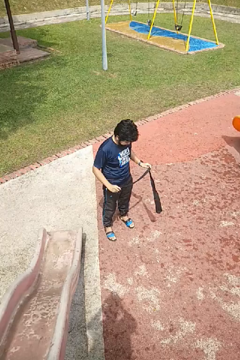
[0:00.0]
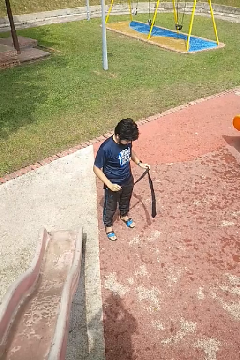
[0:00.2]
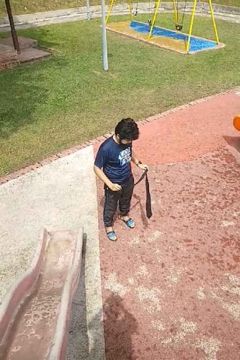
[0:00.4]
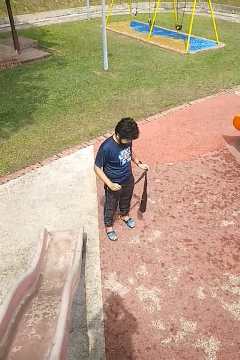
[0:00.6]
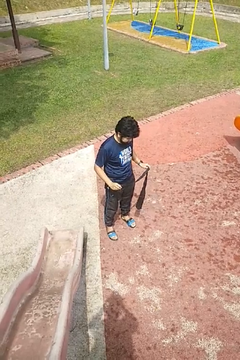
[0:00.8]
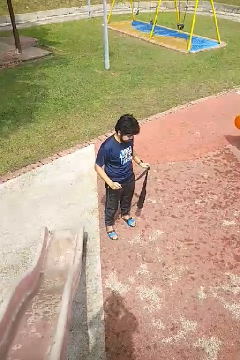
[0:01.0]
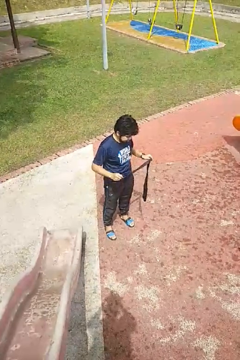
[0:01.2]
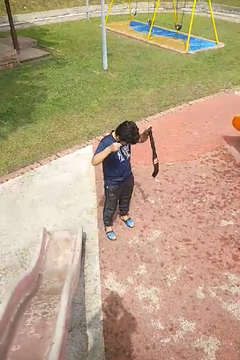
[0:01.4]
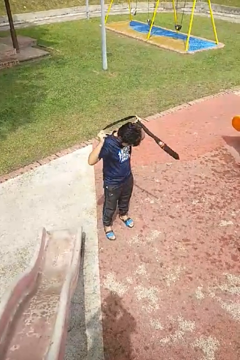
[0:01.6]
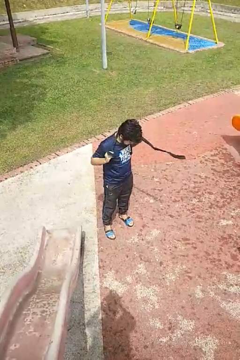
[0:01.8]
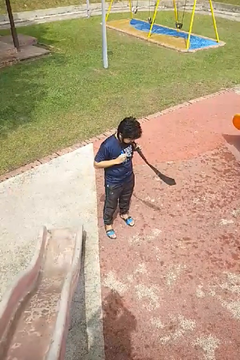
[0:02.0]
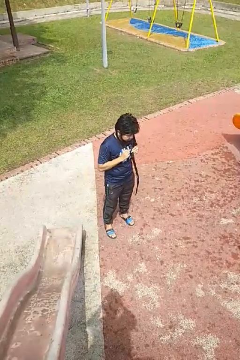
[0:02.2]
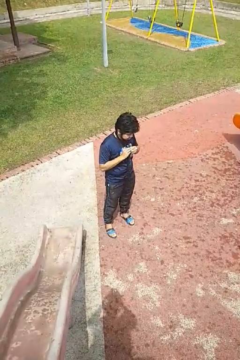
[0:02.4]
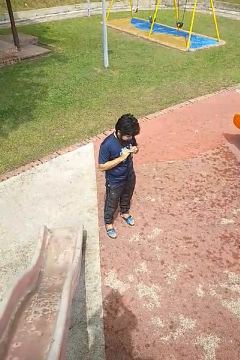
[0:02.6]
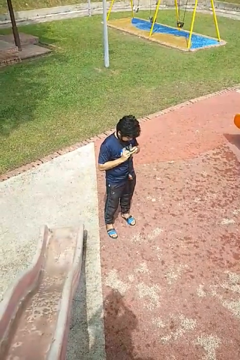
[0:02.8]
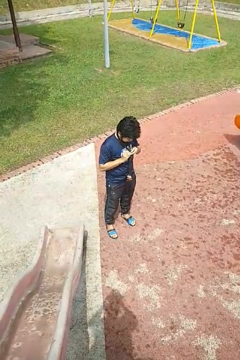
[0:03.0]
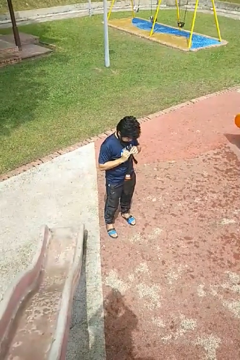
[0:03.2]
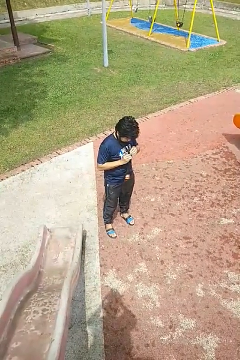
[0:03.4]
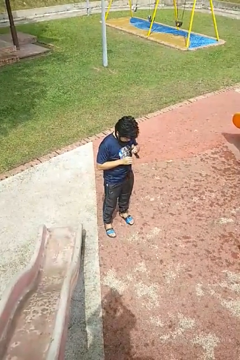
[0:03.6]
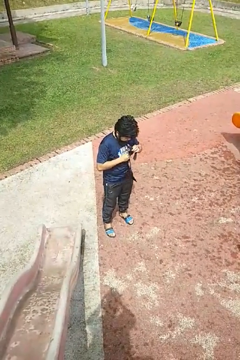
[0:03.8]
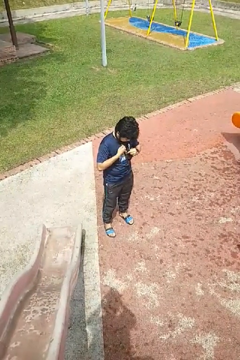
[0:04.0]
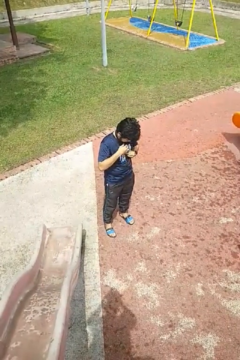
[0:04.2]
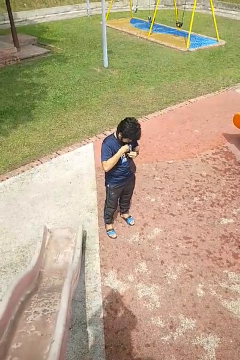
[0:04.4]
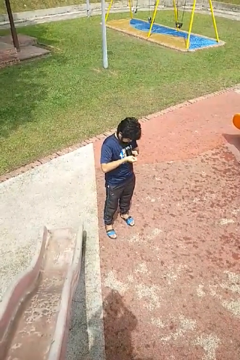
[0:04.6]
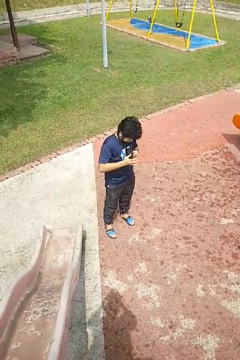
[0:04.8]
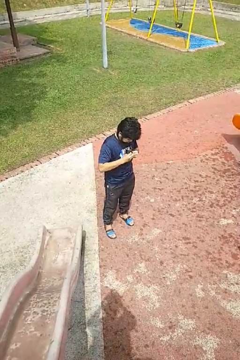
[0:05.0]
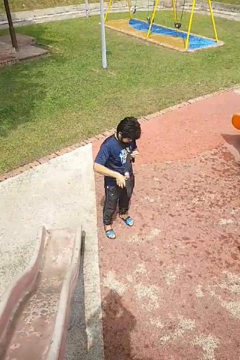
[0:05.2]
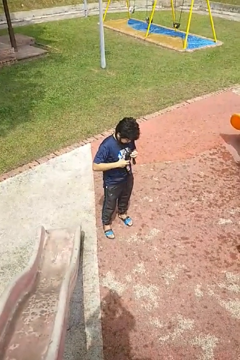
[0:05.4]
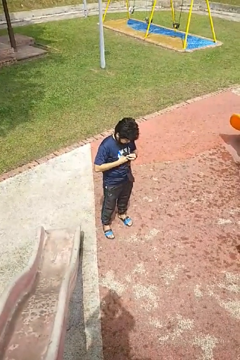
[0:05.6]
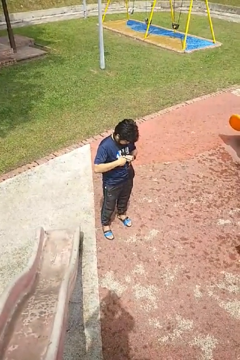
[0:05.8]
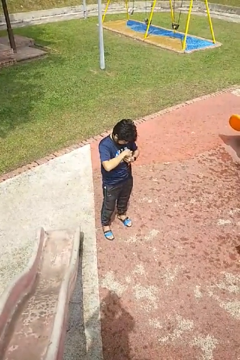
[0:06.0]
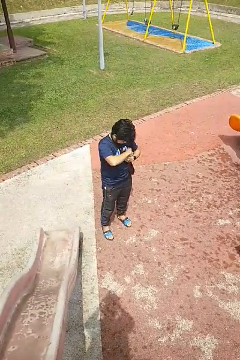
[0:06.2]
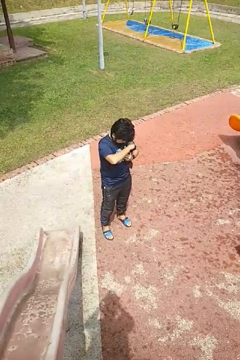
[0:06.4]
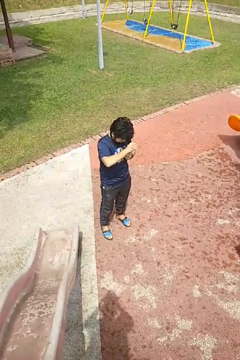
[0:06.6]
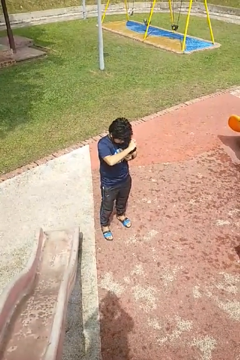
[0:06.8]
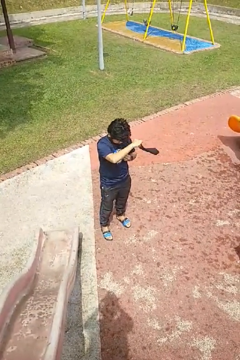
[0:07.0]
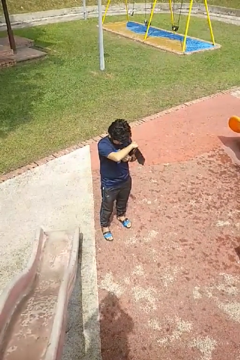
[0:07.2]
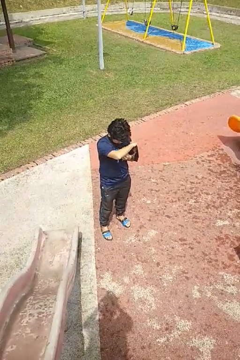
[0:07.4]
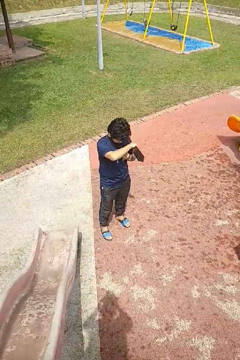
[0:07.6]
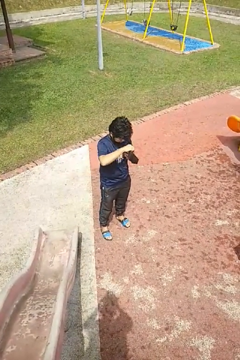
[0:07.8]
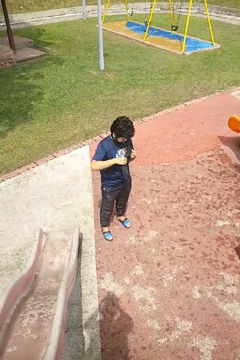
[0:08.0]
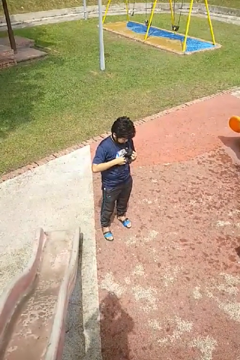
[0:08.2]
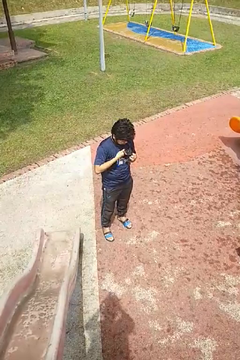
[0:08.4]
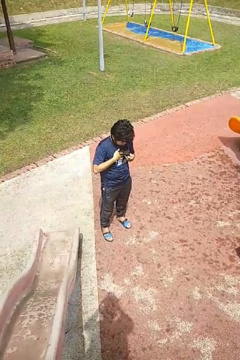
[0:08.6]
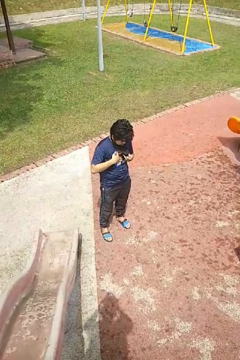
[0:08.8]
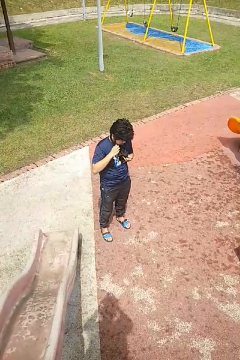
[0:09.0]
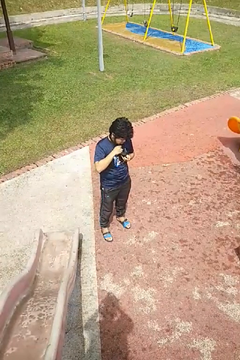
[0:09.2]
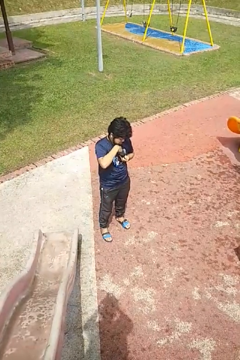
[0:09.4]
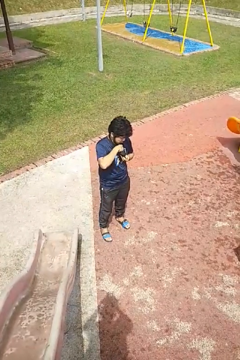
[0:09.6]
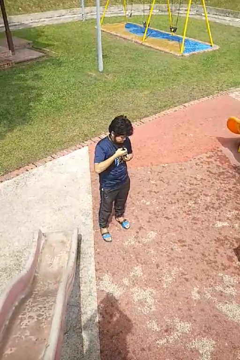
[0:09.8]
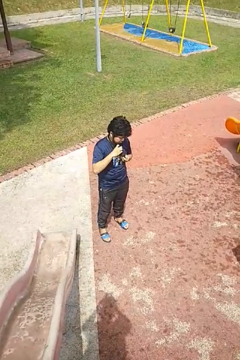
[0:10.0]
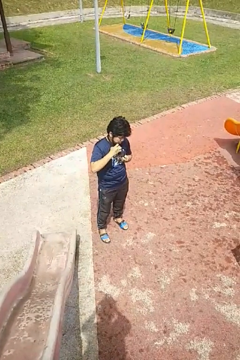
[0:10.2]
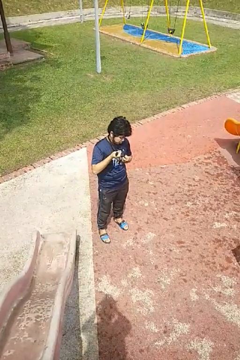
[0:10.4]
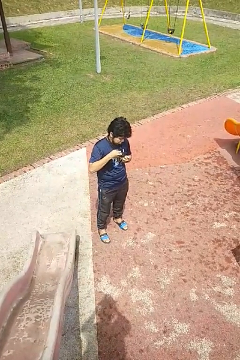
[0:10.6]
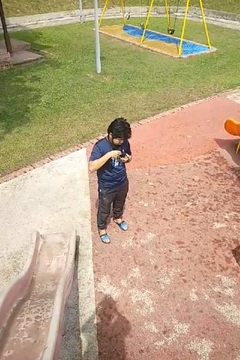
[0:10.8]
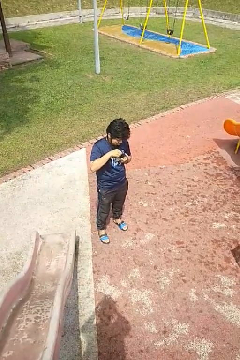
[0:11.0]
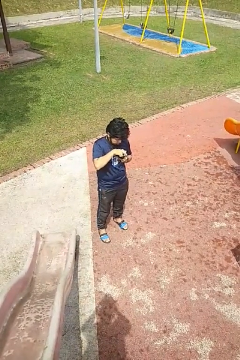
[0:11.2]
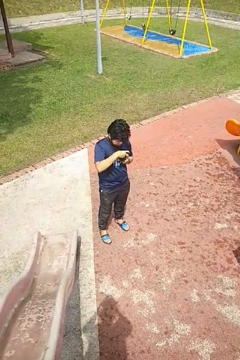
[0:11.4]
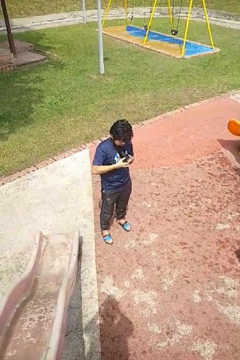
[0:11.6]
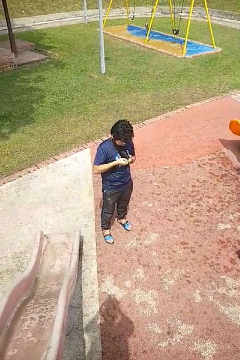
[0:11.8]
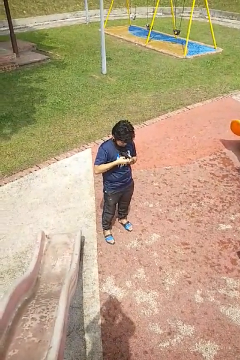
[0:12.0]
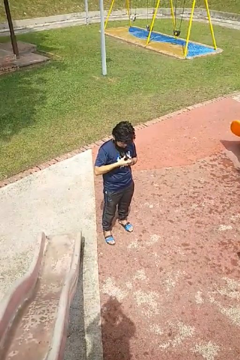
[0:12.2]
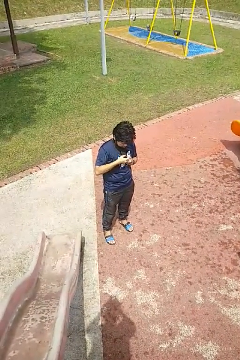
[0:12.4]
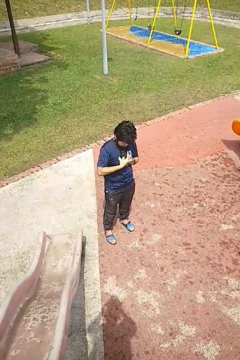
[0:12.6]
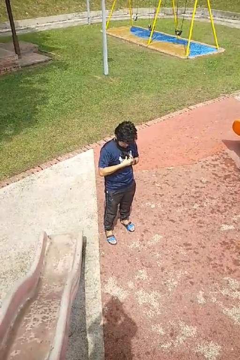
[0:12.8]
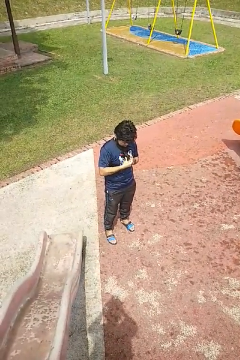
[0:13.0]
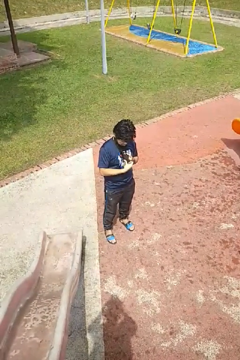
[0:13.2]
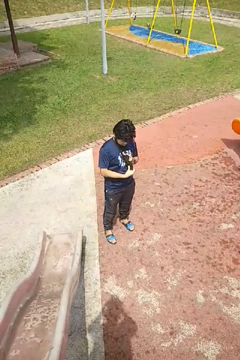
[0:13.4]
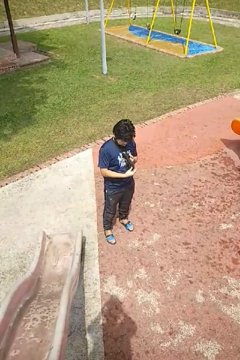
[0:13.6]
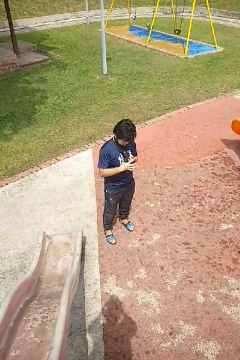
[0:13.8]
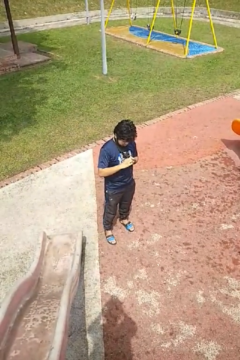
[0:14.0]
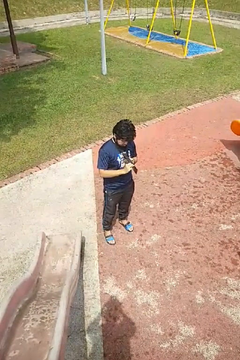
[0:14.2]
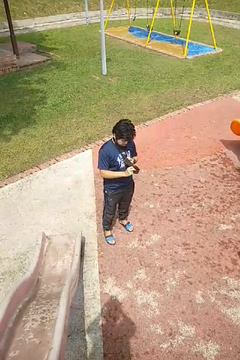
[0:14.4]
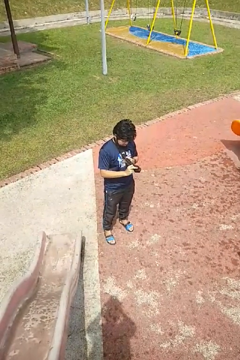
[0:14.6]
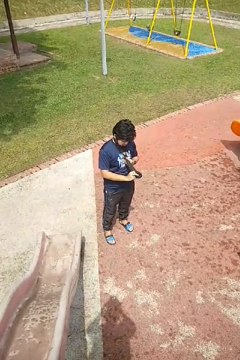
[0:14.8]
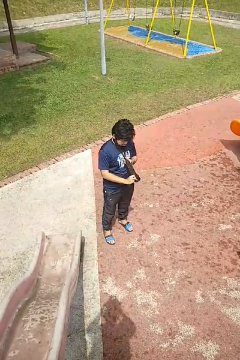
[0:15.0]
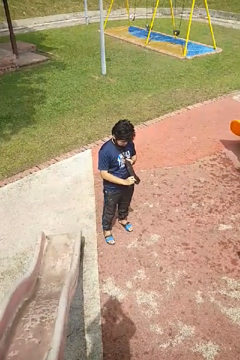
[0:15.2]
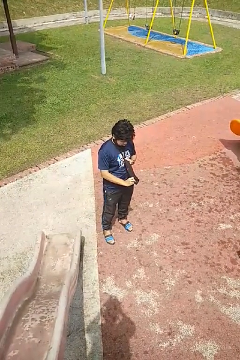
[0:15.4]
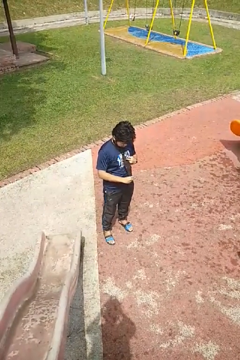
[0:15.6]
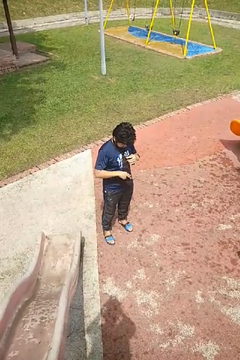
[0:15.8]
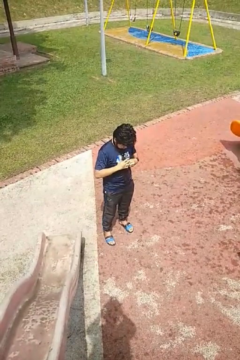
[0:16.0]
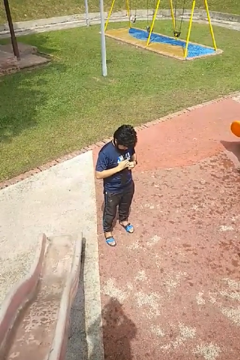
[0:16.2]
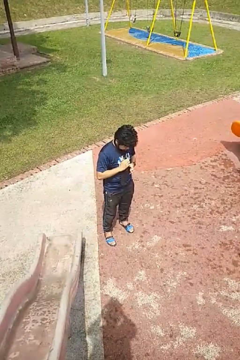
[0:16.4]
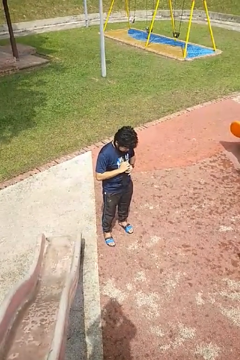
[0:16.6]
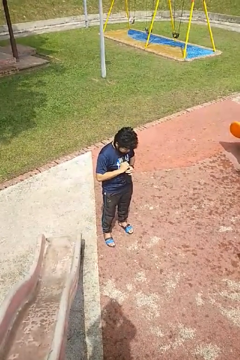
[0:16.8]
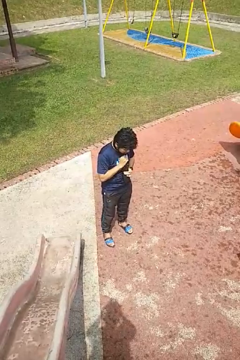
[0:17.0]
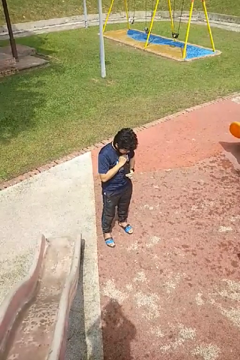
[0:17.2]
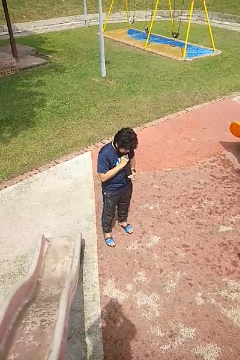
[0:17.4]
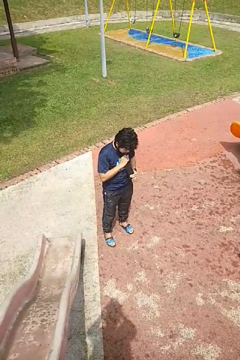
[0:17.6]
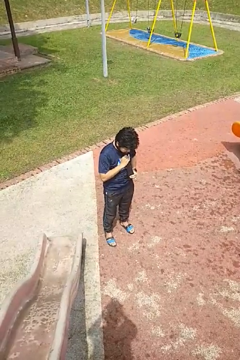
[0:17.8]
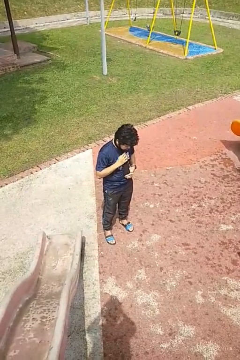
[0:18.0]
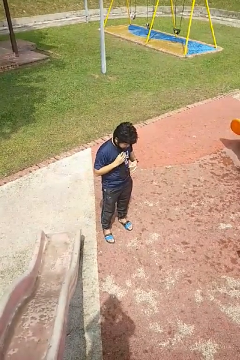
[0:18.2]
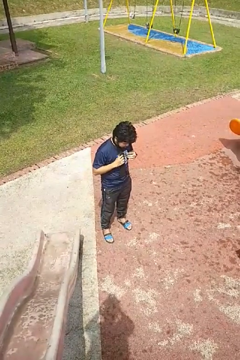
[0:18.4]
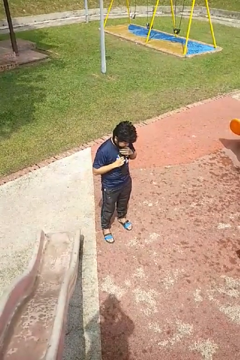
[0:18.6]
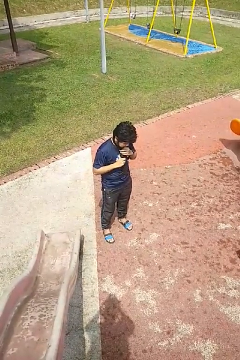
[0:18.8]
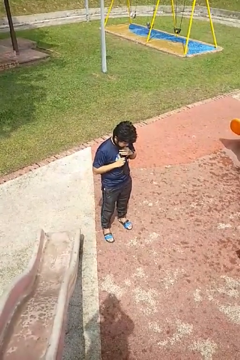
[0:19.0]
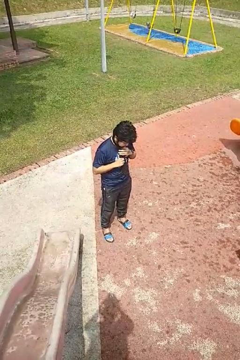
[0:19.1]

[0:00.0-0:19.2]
person puts on necktie

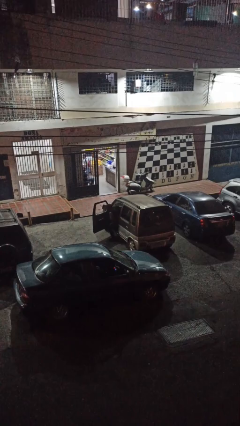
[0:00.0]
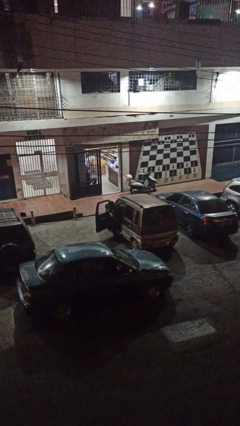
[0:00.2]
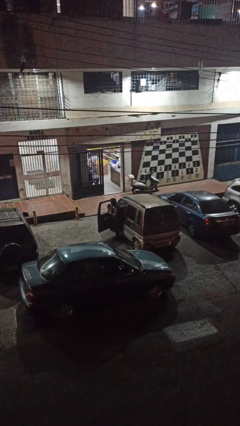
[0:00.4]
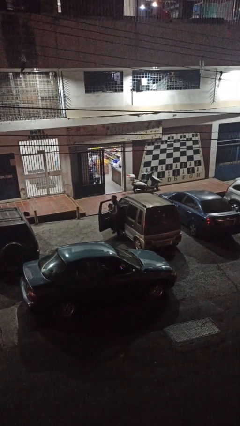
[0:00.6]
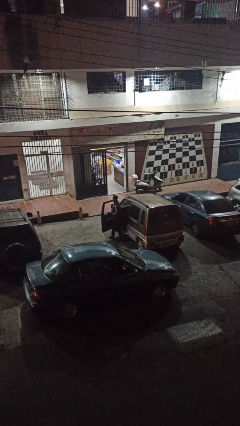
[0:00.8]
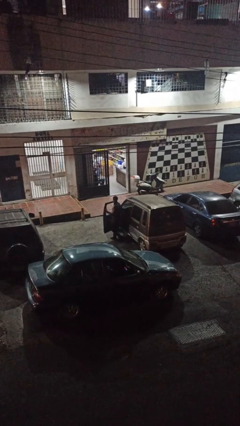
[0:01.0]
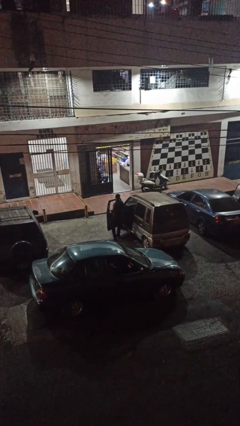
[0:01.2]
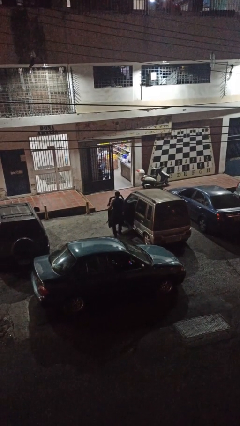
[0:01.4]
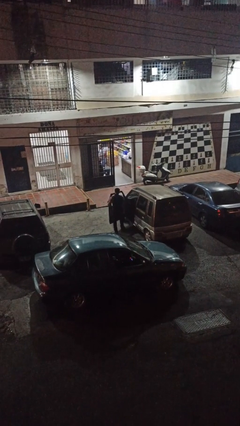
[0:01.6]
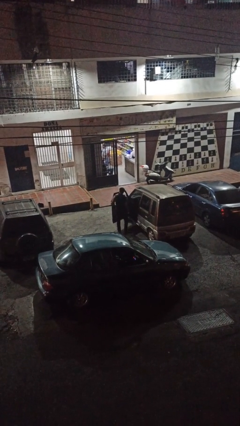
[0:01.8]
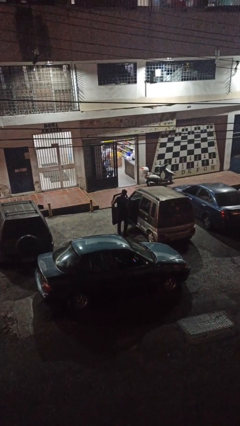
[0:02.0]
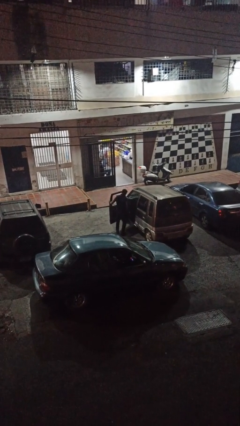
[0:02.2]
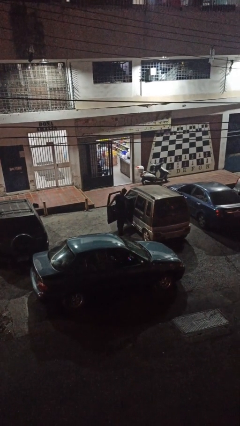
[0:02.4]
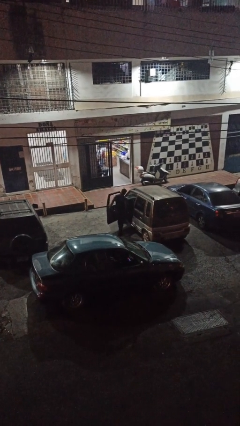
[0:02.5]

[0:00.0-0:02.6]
person exits car
